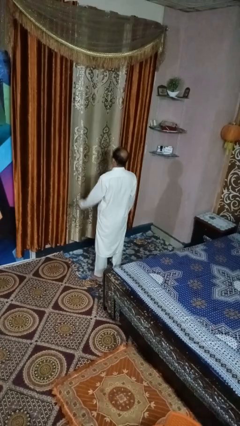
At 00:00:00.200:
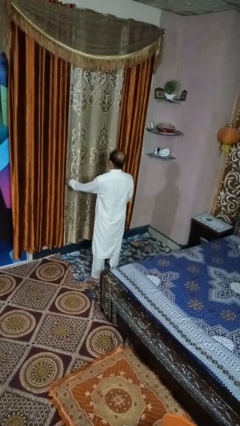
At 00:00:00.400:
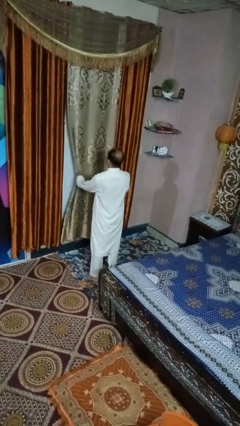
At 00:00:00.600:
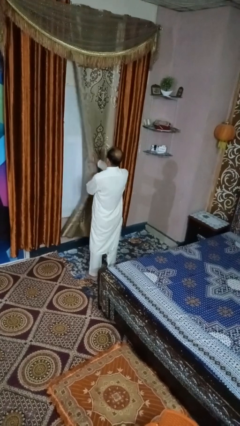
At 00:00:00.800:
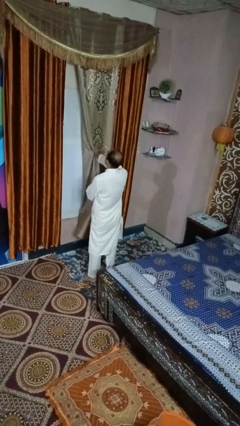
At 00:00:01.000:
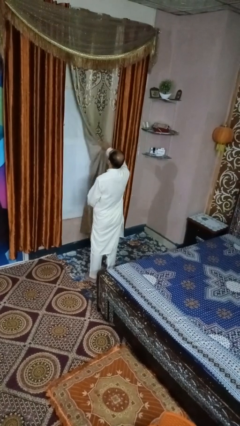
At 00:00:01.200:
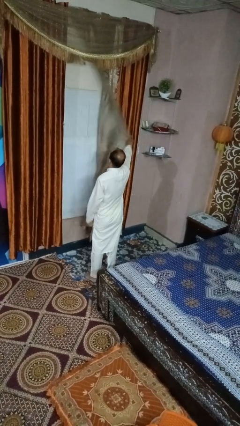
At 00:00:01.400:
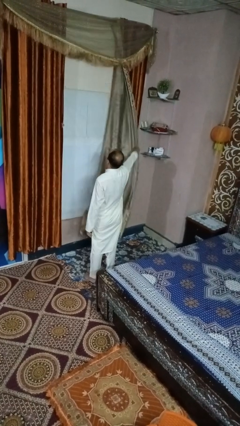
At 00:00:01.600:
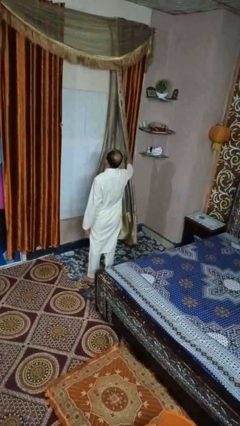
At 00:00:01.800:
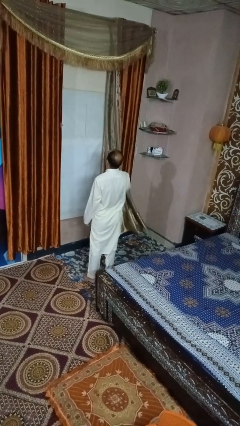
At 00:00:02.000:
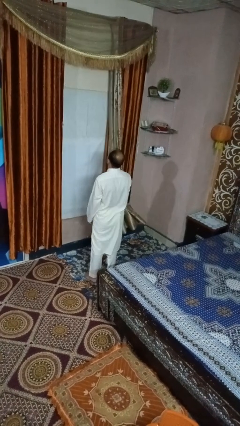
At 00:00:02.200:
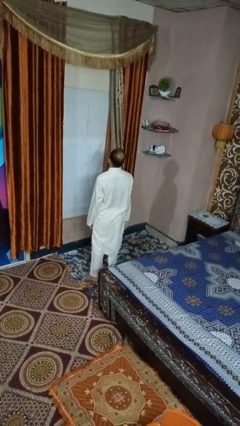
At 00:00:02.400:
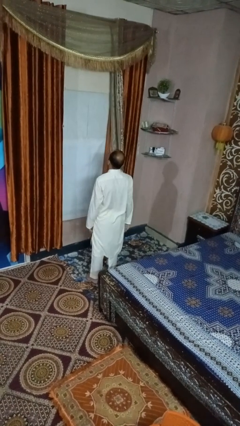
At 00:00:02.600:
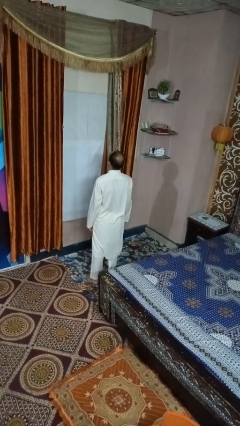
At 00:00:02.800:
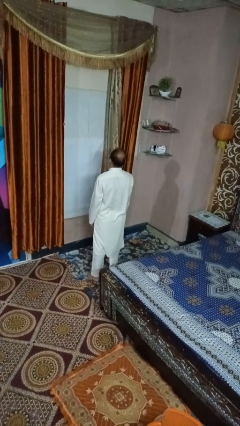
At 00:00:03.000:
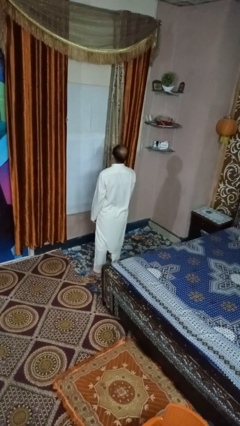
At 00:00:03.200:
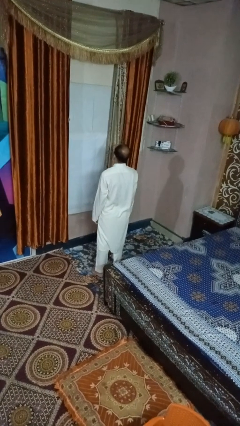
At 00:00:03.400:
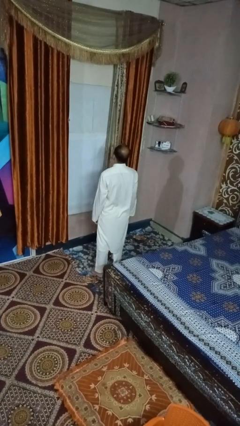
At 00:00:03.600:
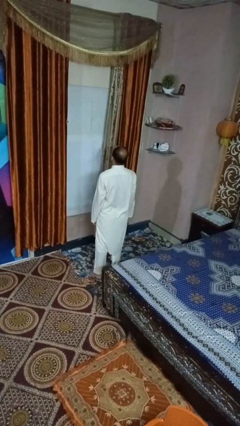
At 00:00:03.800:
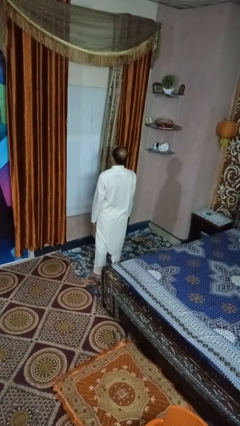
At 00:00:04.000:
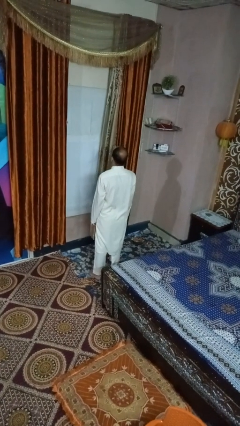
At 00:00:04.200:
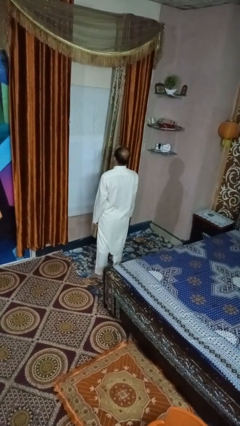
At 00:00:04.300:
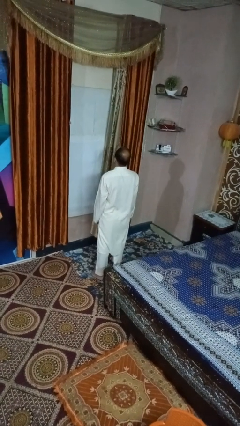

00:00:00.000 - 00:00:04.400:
person opens curtains

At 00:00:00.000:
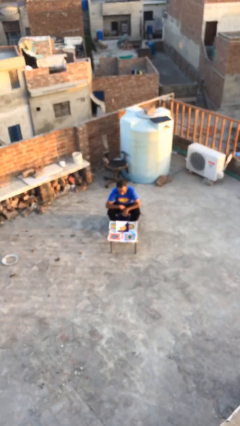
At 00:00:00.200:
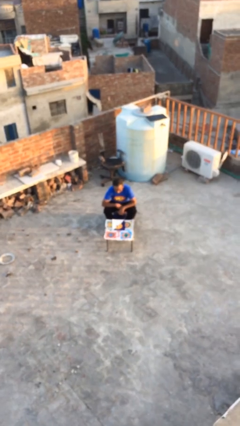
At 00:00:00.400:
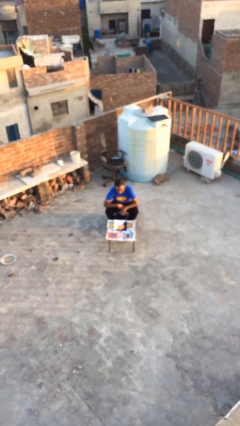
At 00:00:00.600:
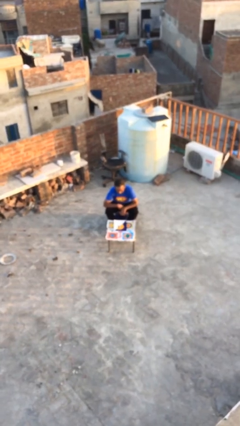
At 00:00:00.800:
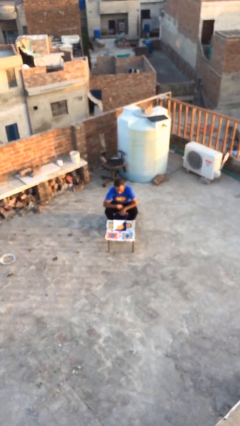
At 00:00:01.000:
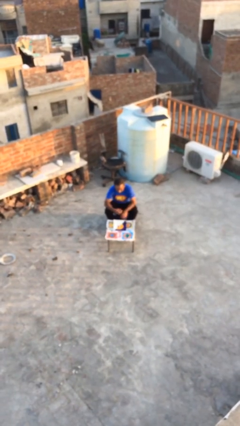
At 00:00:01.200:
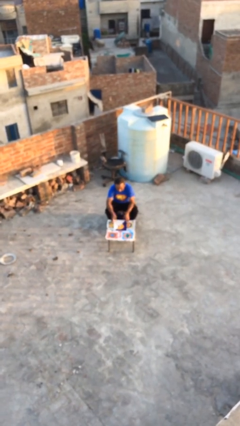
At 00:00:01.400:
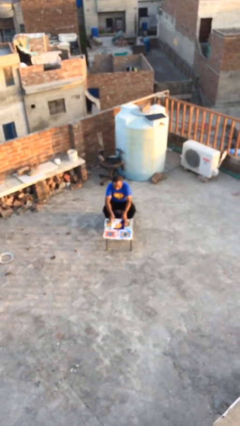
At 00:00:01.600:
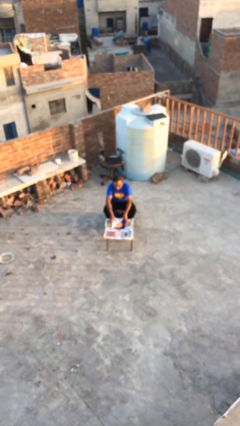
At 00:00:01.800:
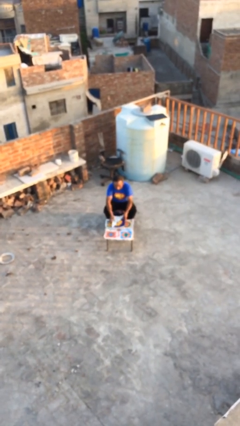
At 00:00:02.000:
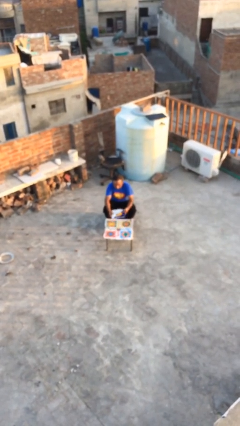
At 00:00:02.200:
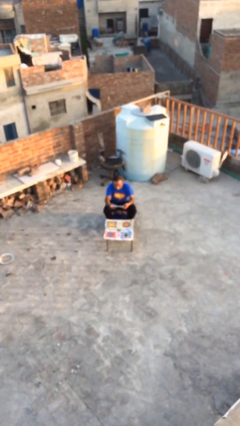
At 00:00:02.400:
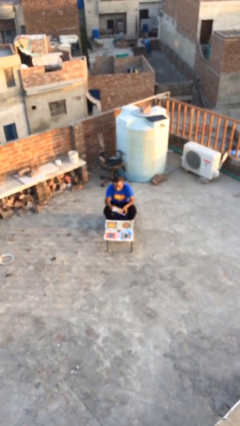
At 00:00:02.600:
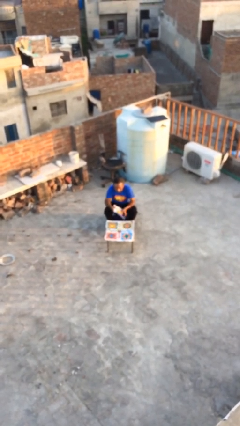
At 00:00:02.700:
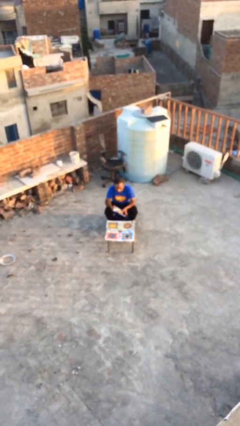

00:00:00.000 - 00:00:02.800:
person picks up object from table

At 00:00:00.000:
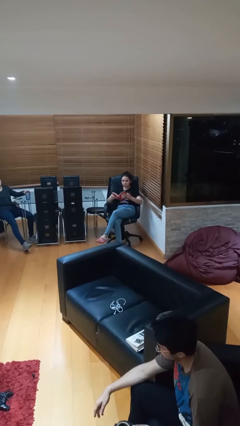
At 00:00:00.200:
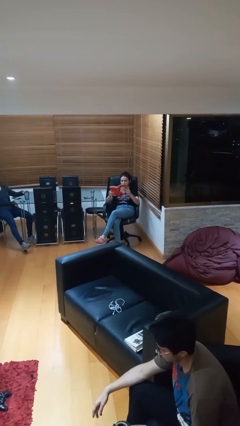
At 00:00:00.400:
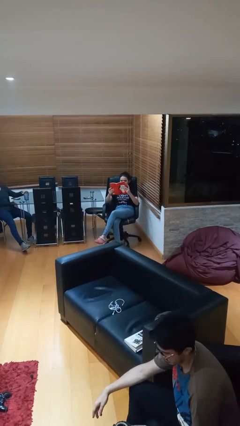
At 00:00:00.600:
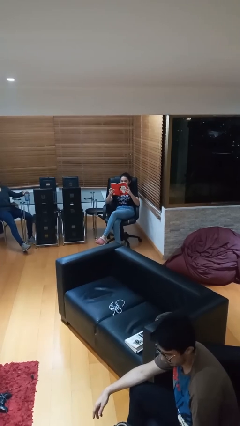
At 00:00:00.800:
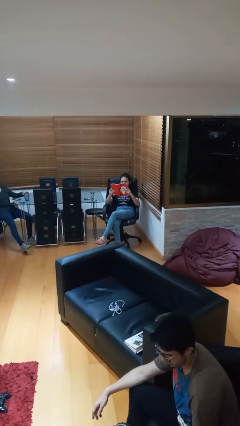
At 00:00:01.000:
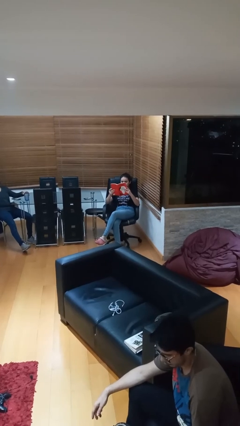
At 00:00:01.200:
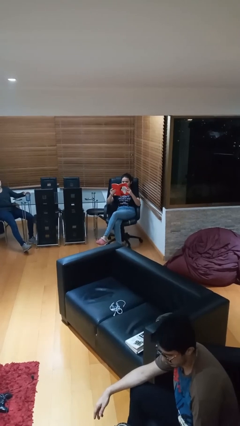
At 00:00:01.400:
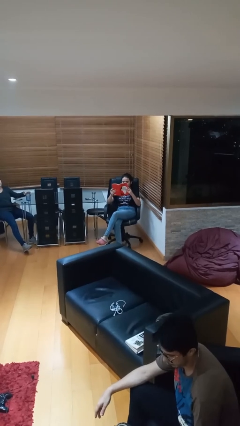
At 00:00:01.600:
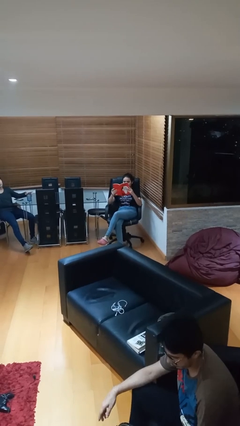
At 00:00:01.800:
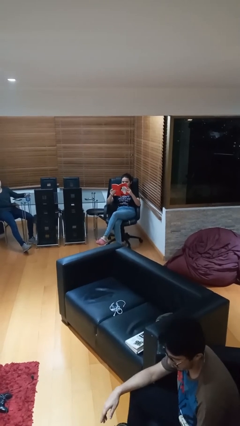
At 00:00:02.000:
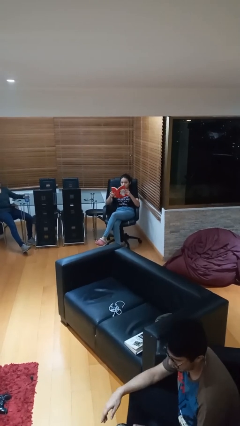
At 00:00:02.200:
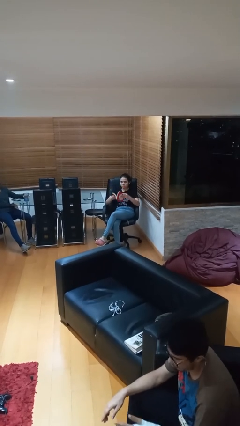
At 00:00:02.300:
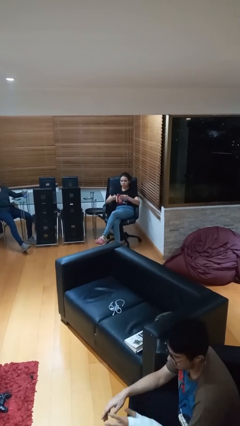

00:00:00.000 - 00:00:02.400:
person reads document

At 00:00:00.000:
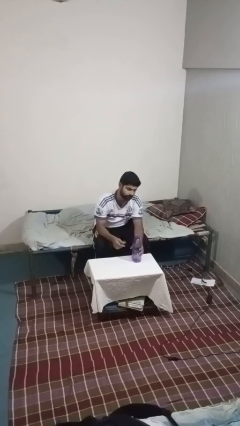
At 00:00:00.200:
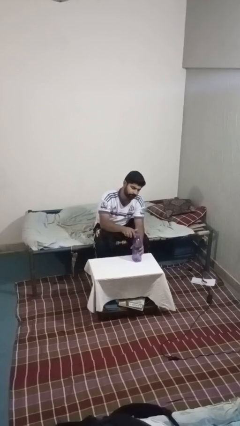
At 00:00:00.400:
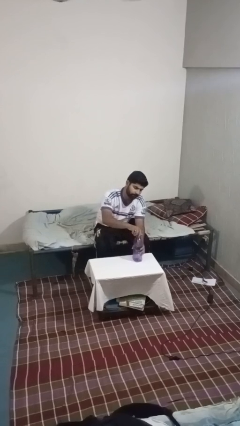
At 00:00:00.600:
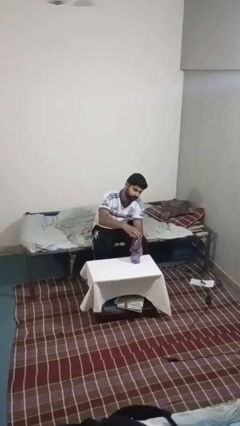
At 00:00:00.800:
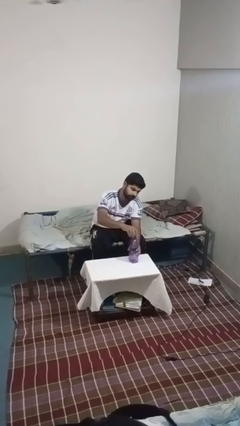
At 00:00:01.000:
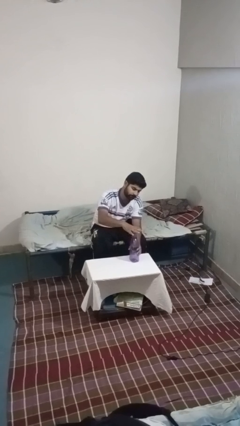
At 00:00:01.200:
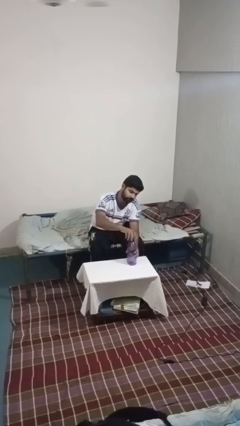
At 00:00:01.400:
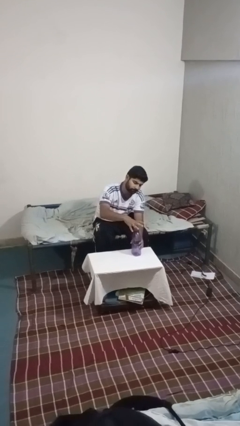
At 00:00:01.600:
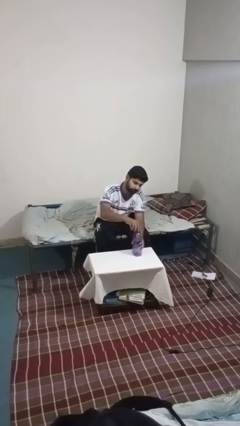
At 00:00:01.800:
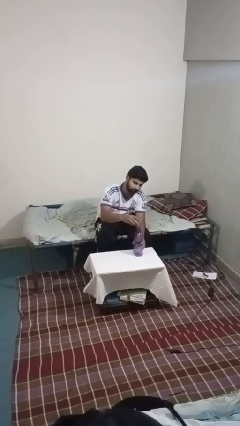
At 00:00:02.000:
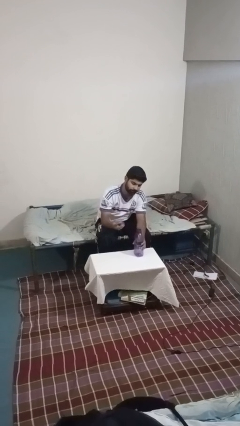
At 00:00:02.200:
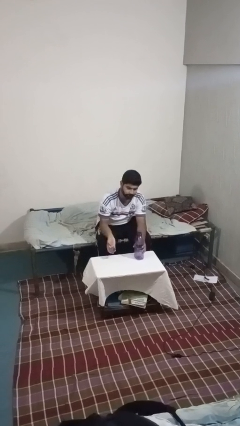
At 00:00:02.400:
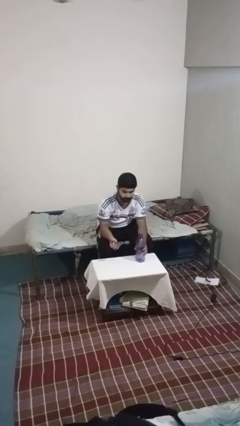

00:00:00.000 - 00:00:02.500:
person unscrews lid from bottle

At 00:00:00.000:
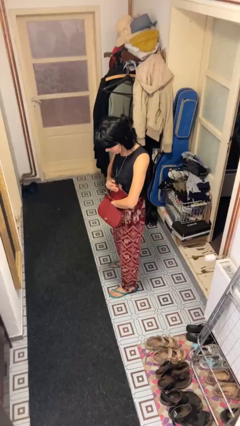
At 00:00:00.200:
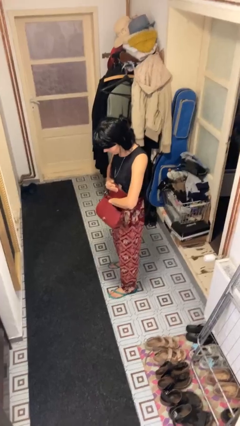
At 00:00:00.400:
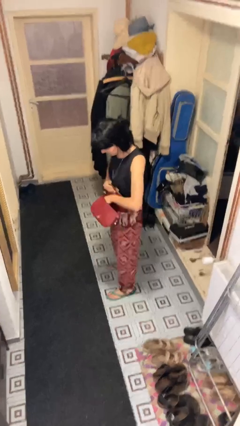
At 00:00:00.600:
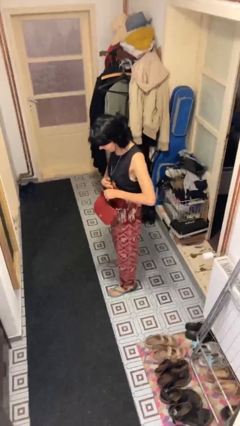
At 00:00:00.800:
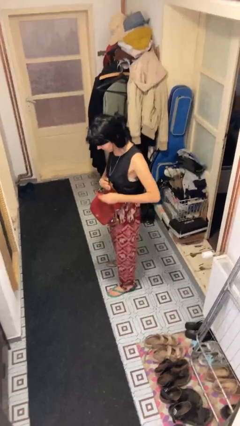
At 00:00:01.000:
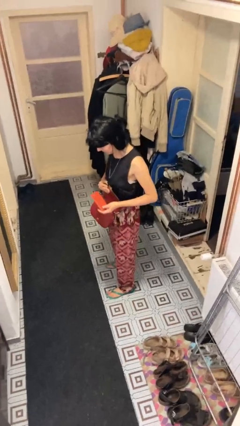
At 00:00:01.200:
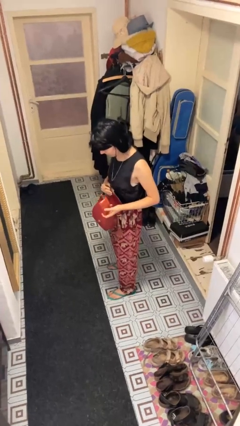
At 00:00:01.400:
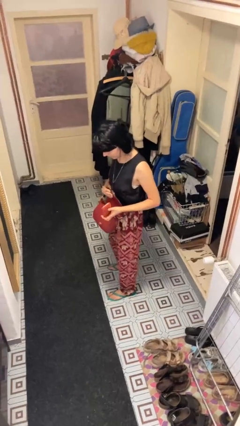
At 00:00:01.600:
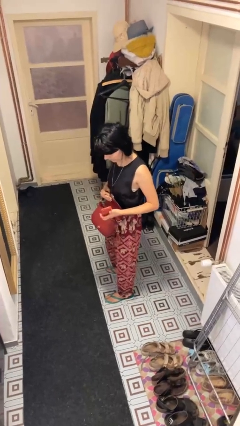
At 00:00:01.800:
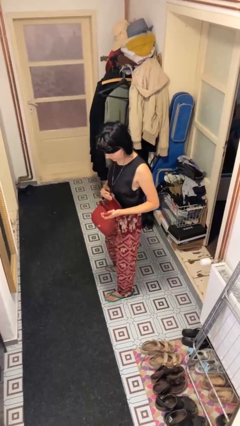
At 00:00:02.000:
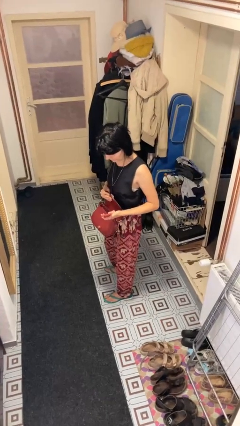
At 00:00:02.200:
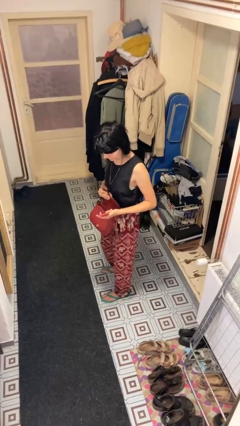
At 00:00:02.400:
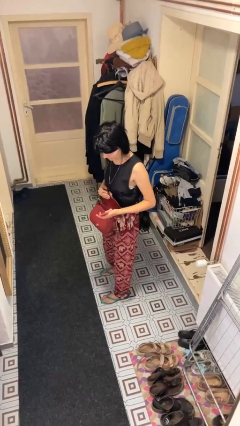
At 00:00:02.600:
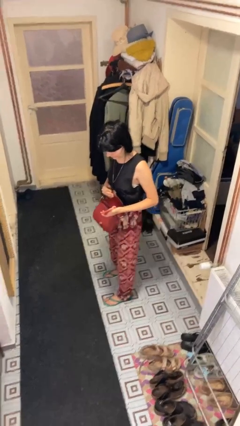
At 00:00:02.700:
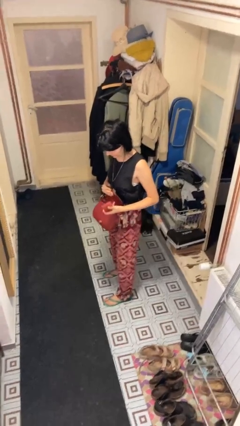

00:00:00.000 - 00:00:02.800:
person takes object from purse

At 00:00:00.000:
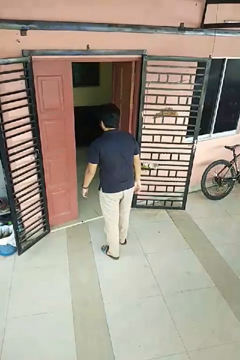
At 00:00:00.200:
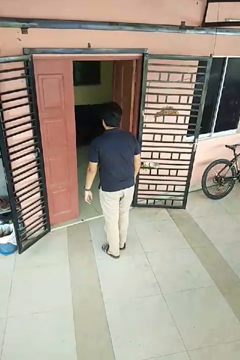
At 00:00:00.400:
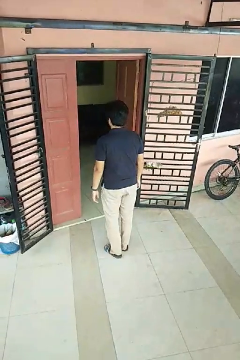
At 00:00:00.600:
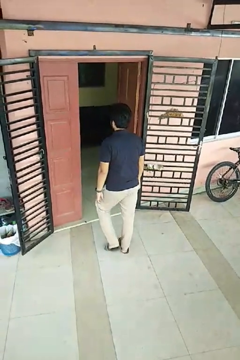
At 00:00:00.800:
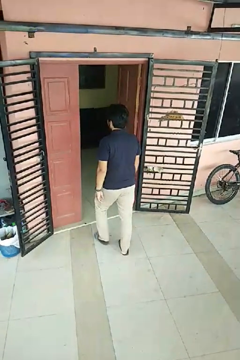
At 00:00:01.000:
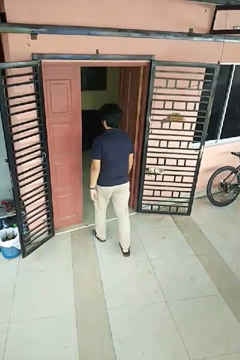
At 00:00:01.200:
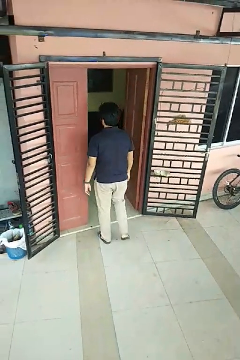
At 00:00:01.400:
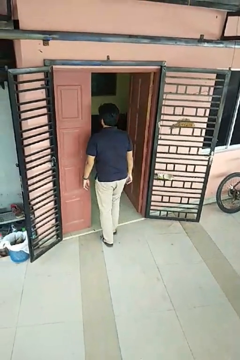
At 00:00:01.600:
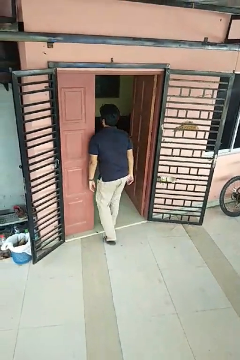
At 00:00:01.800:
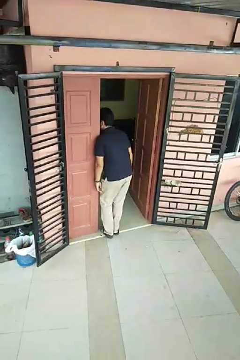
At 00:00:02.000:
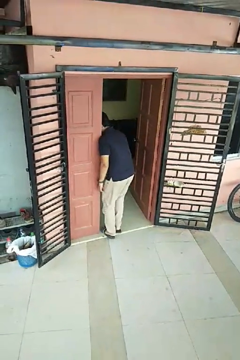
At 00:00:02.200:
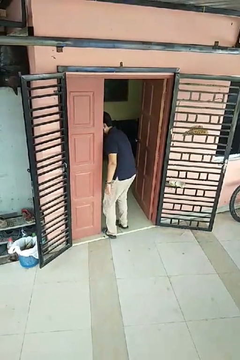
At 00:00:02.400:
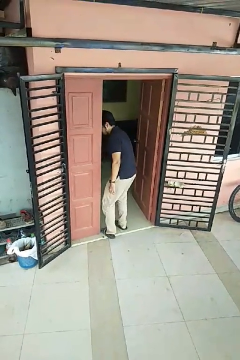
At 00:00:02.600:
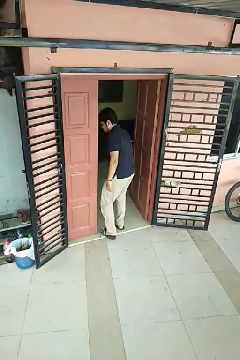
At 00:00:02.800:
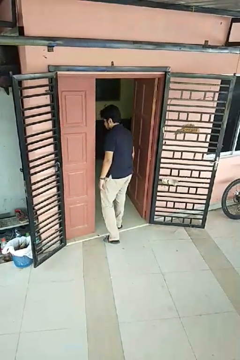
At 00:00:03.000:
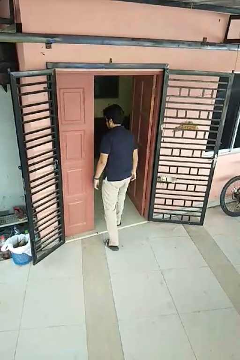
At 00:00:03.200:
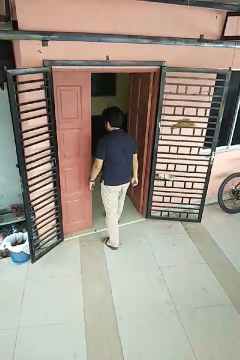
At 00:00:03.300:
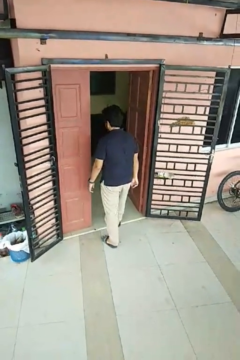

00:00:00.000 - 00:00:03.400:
person bumps into wall
